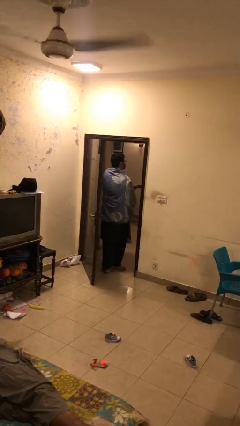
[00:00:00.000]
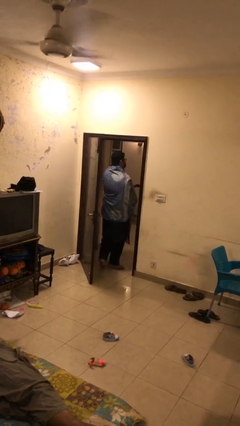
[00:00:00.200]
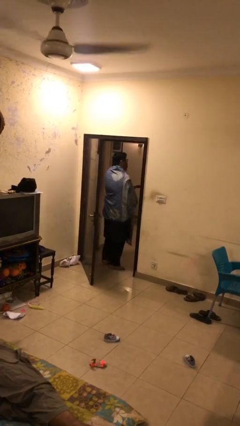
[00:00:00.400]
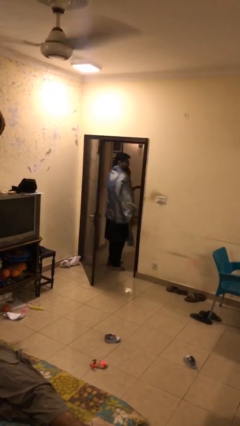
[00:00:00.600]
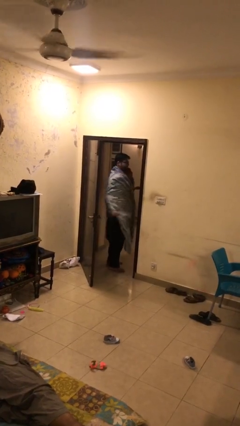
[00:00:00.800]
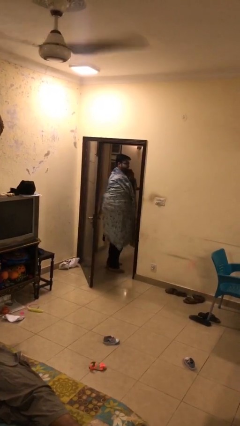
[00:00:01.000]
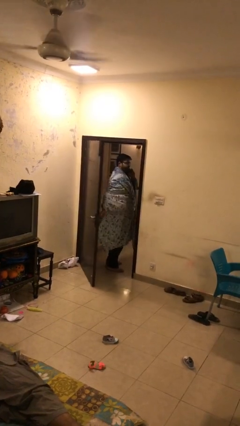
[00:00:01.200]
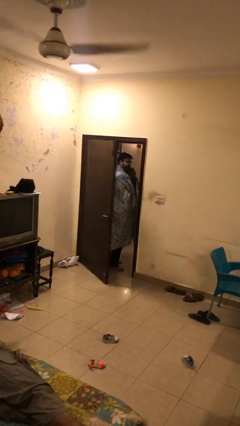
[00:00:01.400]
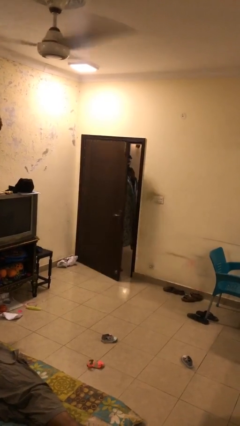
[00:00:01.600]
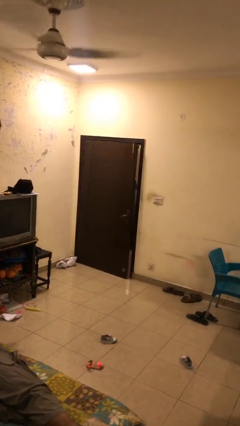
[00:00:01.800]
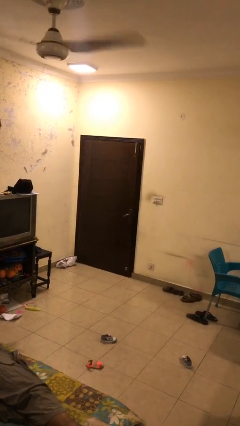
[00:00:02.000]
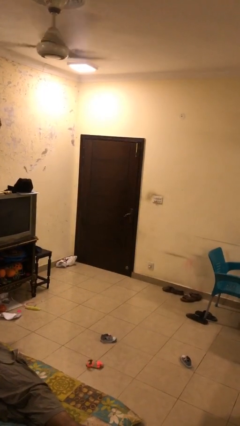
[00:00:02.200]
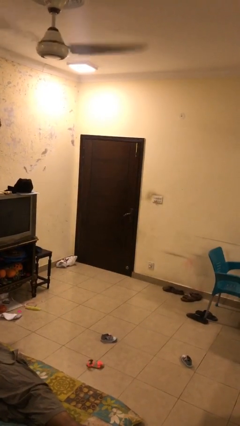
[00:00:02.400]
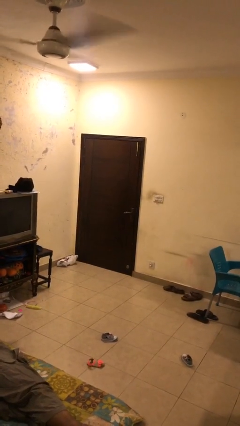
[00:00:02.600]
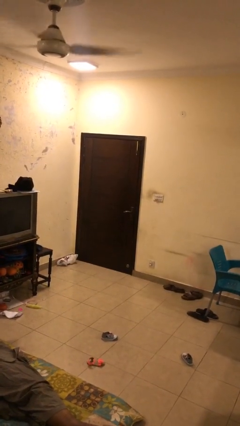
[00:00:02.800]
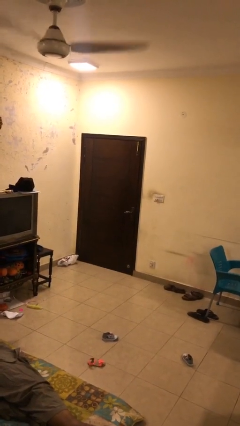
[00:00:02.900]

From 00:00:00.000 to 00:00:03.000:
person closes facility door

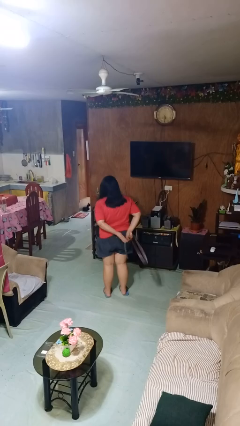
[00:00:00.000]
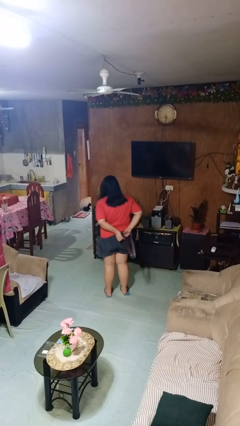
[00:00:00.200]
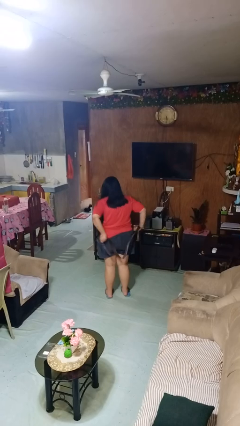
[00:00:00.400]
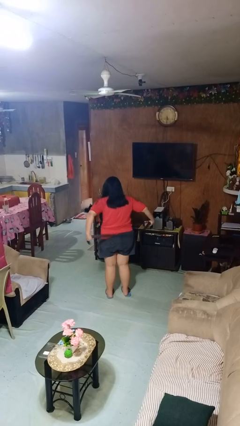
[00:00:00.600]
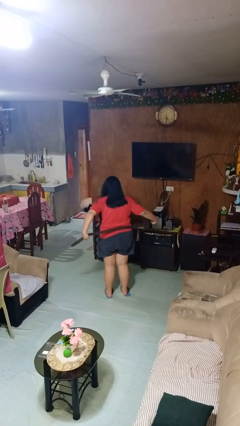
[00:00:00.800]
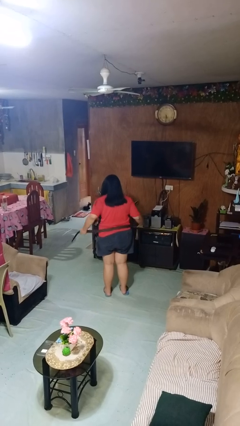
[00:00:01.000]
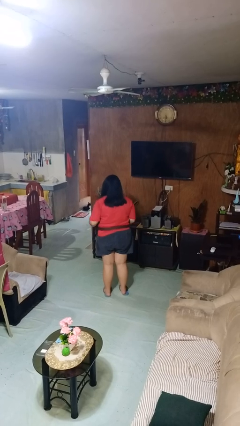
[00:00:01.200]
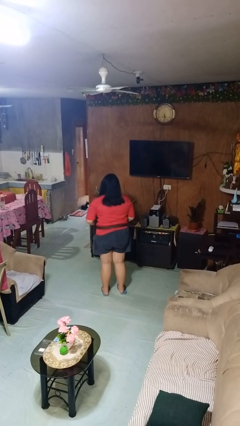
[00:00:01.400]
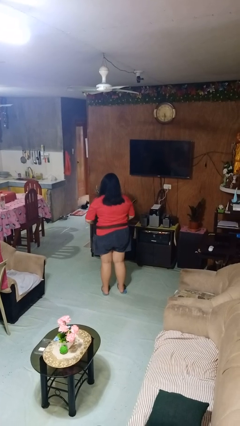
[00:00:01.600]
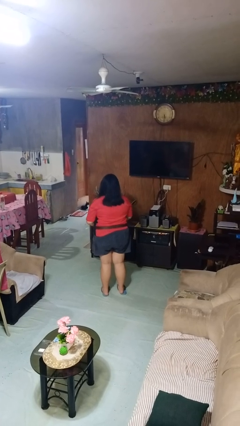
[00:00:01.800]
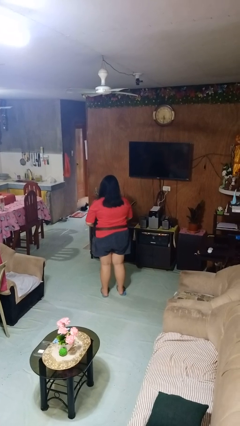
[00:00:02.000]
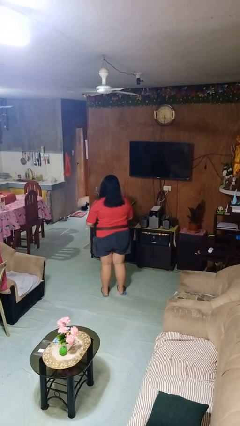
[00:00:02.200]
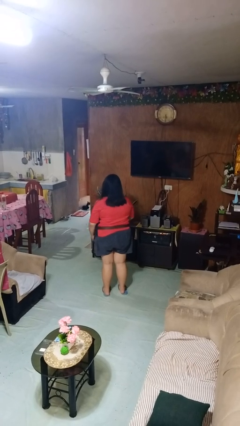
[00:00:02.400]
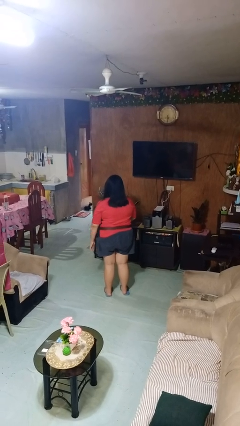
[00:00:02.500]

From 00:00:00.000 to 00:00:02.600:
person puts on belt

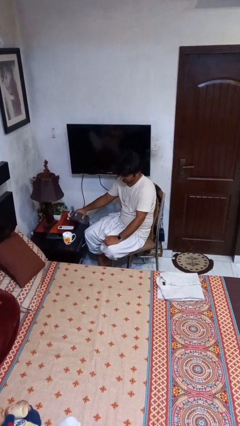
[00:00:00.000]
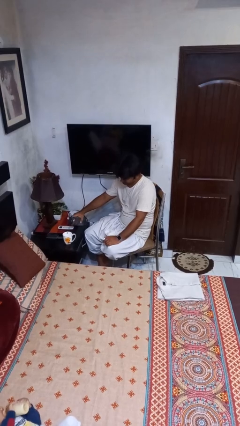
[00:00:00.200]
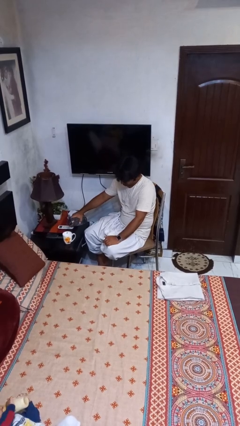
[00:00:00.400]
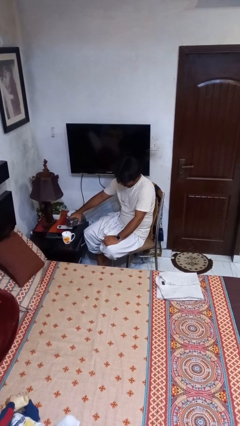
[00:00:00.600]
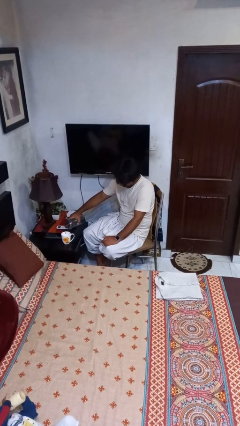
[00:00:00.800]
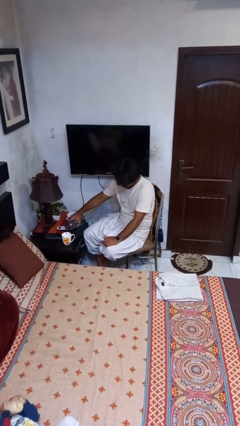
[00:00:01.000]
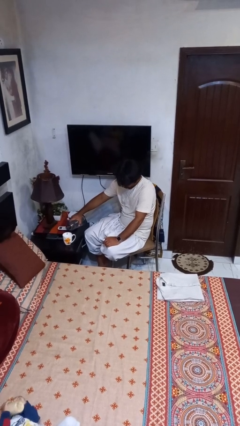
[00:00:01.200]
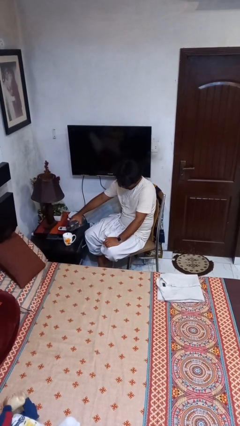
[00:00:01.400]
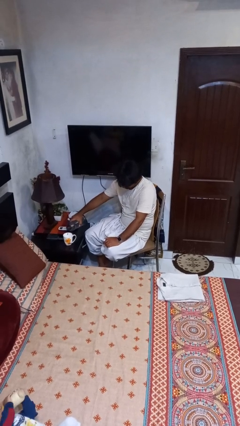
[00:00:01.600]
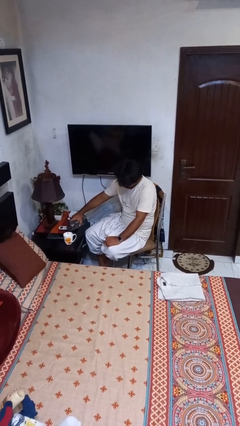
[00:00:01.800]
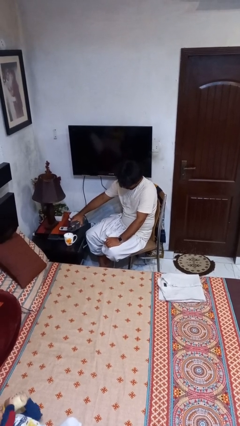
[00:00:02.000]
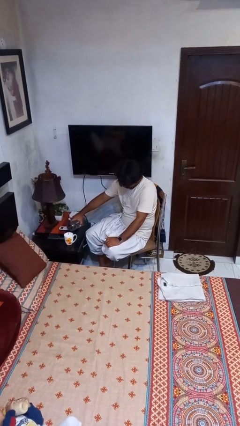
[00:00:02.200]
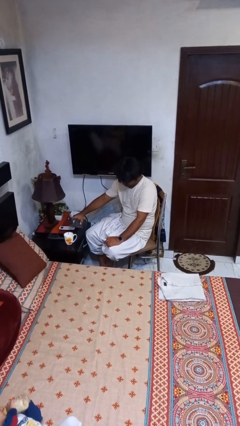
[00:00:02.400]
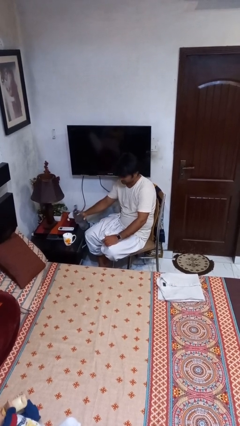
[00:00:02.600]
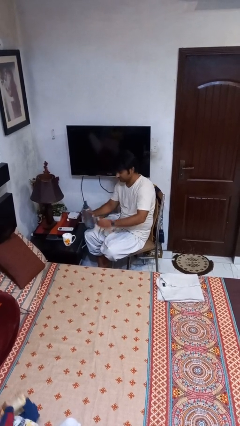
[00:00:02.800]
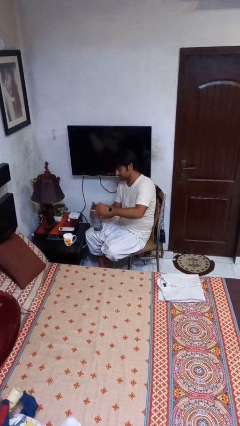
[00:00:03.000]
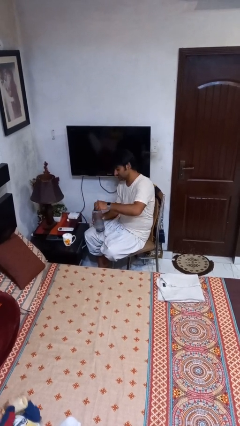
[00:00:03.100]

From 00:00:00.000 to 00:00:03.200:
person pours liquid into cup

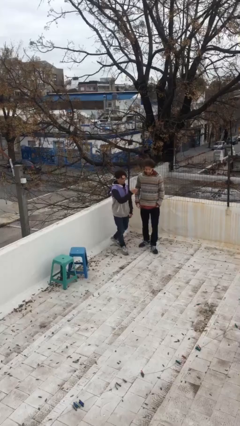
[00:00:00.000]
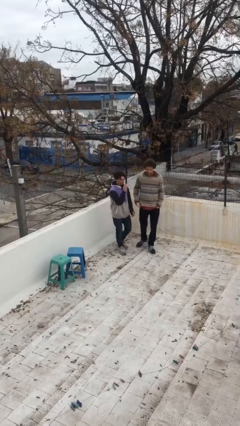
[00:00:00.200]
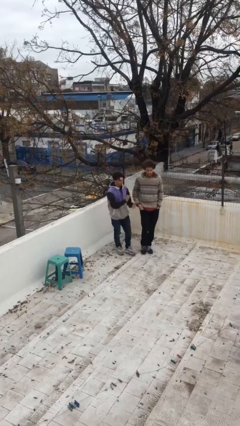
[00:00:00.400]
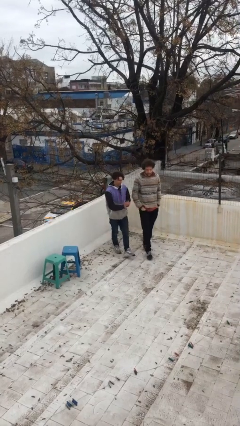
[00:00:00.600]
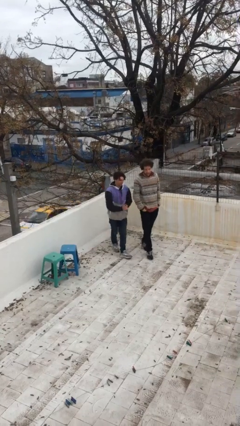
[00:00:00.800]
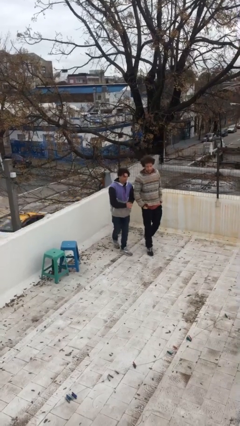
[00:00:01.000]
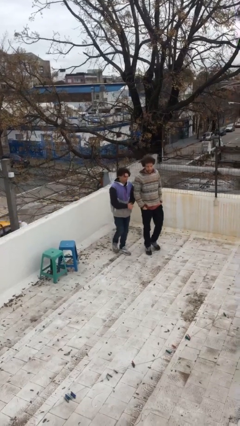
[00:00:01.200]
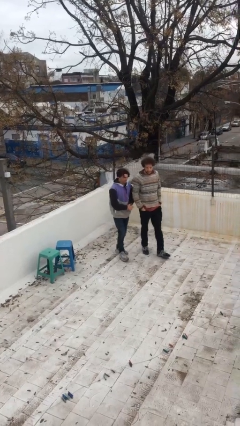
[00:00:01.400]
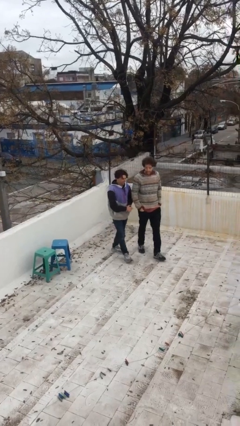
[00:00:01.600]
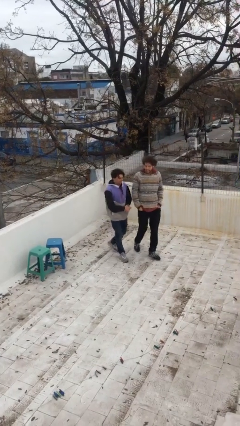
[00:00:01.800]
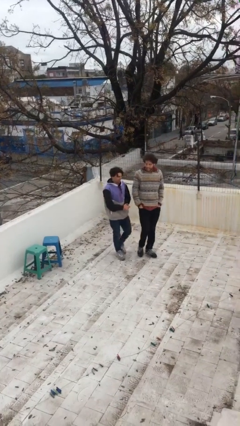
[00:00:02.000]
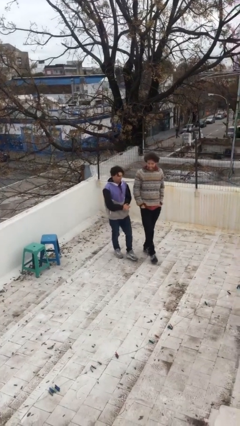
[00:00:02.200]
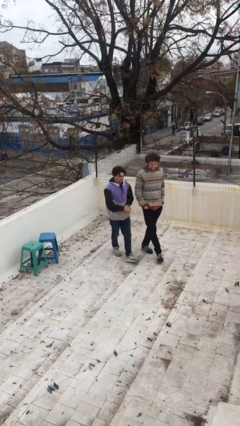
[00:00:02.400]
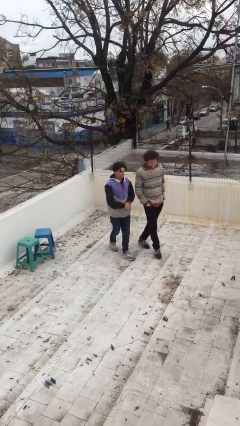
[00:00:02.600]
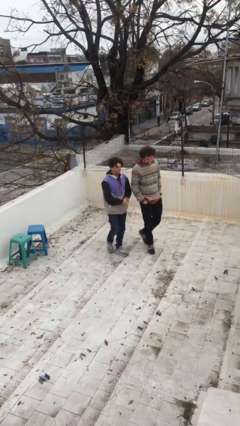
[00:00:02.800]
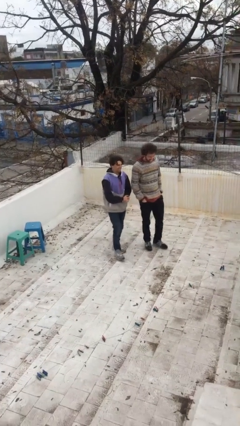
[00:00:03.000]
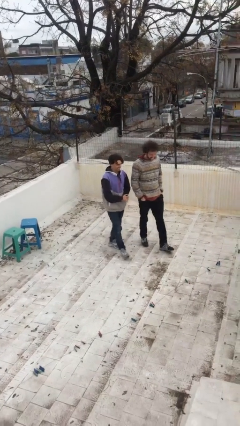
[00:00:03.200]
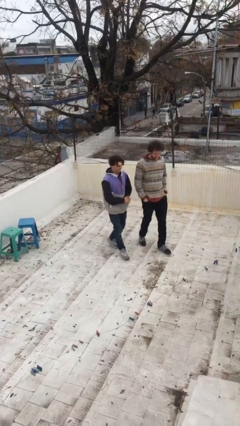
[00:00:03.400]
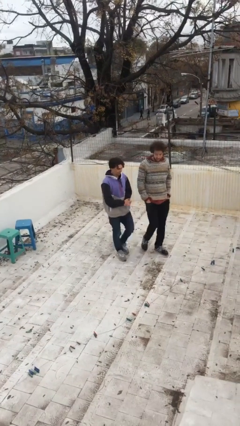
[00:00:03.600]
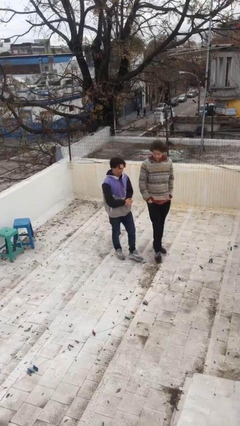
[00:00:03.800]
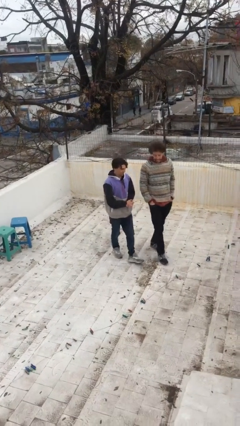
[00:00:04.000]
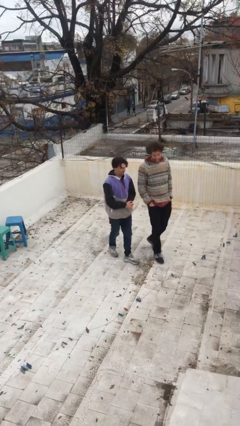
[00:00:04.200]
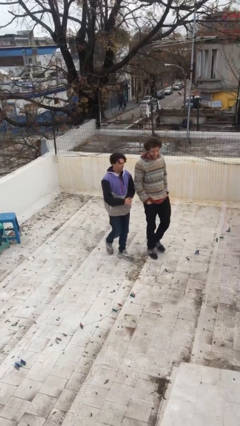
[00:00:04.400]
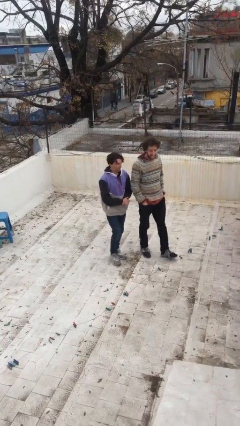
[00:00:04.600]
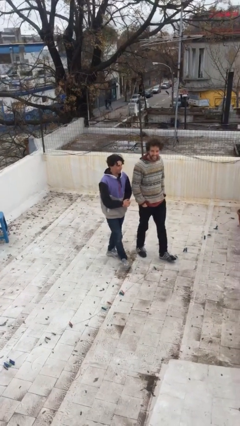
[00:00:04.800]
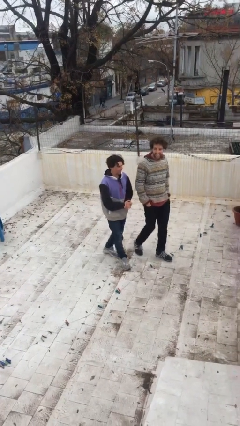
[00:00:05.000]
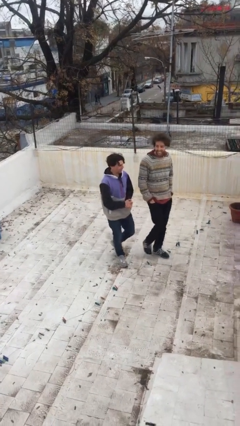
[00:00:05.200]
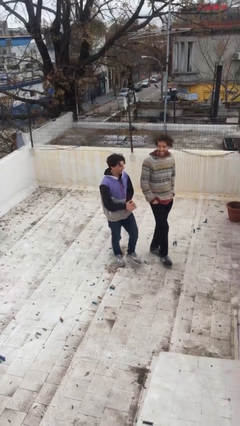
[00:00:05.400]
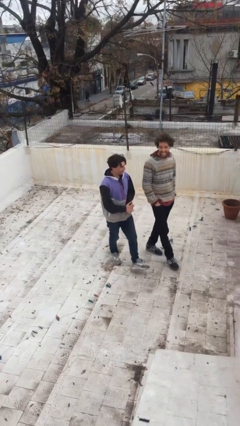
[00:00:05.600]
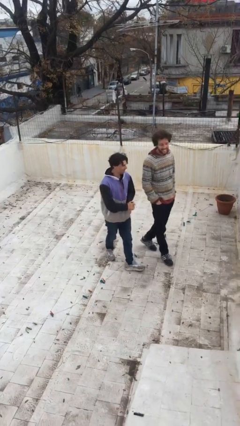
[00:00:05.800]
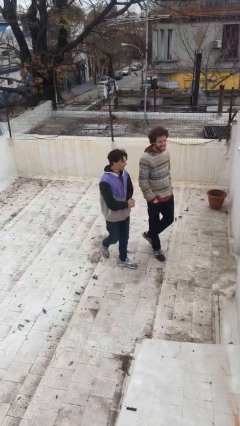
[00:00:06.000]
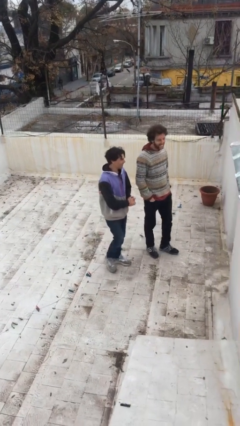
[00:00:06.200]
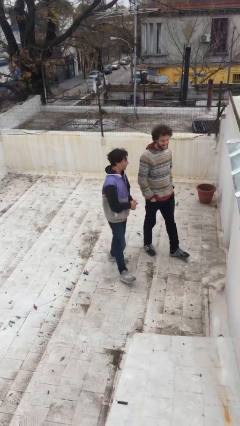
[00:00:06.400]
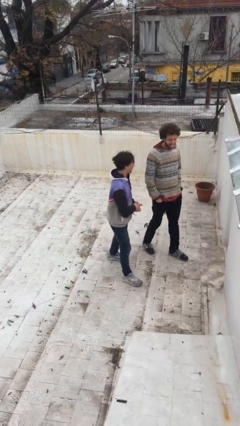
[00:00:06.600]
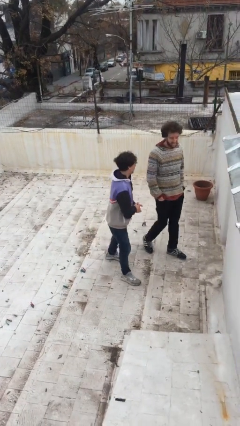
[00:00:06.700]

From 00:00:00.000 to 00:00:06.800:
person talks to person

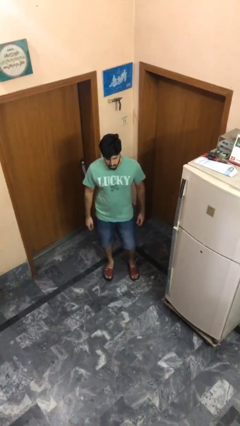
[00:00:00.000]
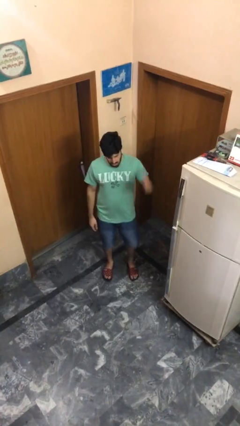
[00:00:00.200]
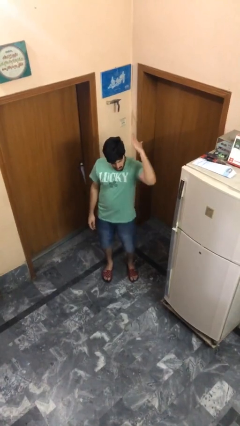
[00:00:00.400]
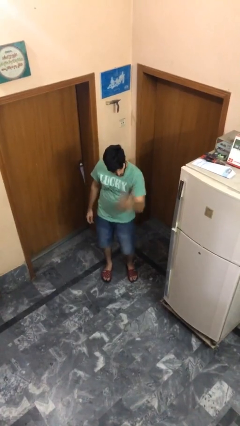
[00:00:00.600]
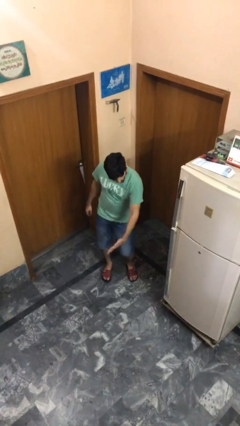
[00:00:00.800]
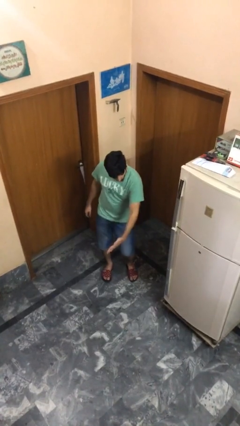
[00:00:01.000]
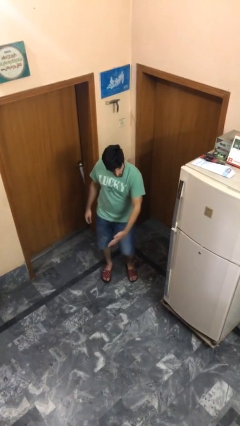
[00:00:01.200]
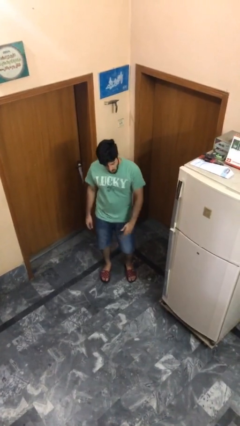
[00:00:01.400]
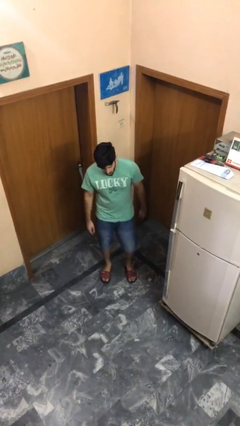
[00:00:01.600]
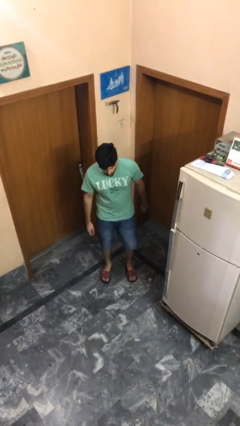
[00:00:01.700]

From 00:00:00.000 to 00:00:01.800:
person karate chop
